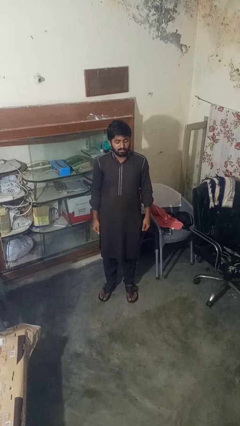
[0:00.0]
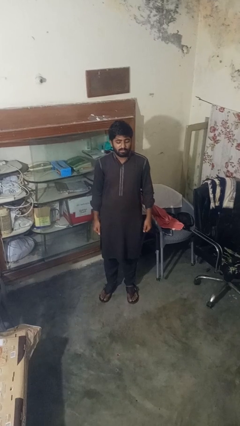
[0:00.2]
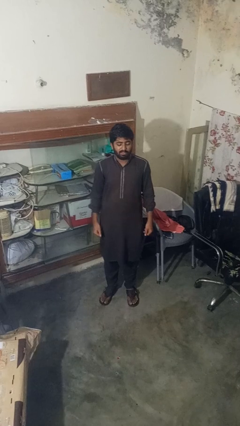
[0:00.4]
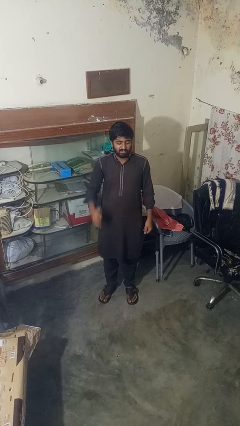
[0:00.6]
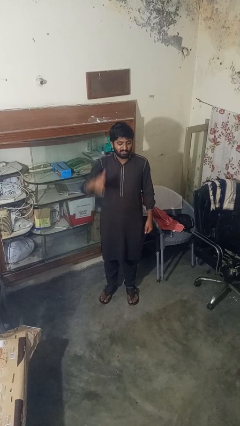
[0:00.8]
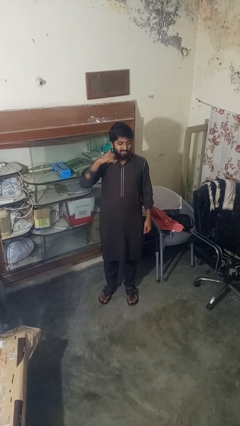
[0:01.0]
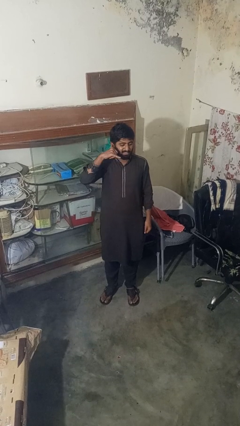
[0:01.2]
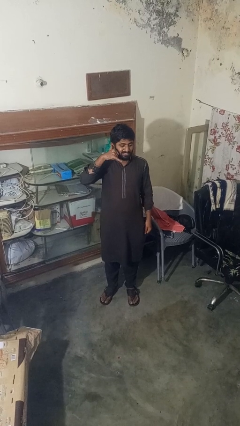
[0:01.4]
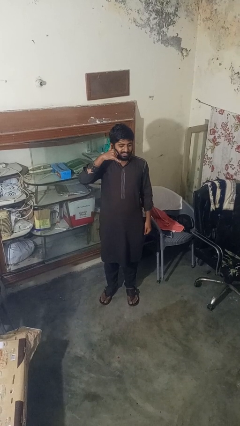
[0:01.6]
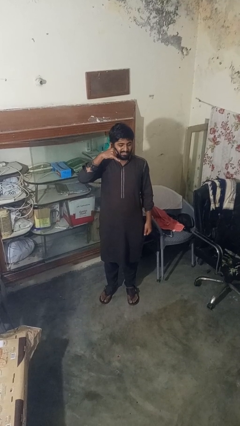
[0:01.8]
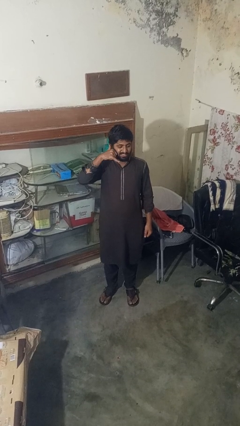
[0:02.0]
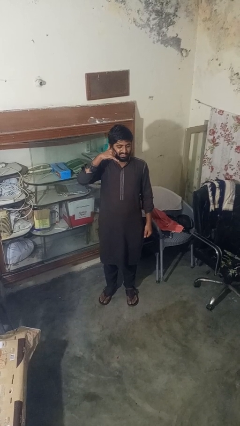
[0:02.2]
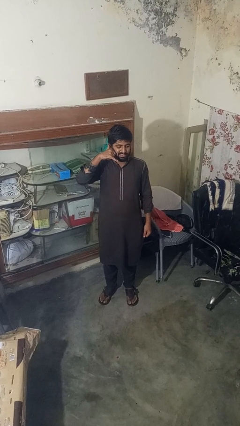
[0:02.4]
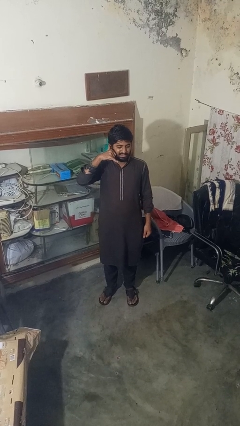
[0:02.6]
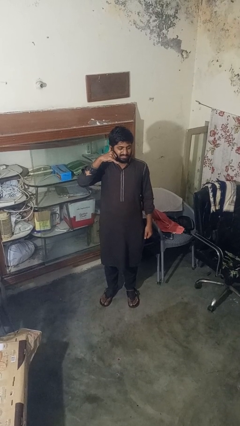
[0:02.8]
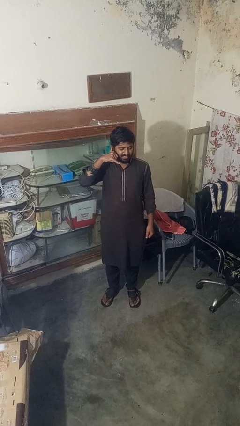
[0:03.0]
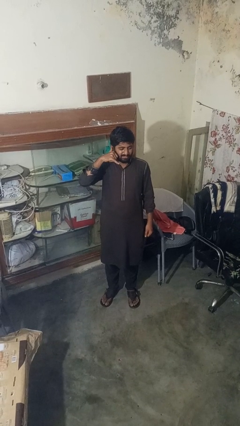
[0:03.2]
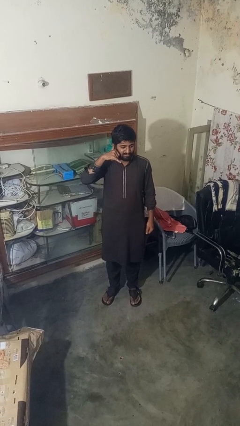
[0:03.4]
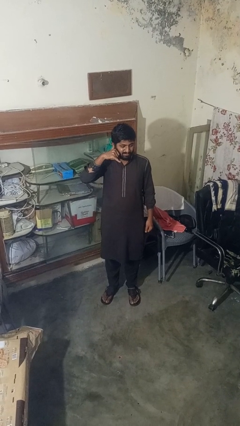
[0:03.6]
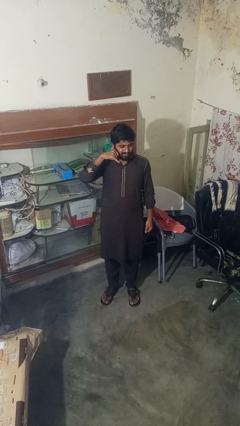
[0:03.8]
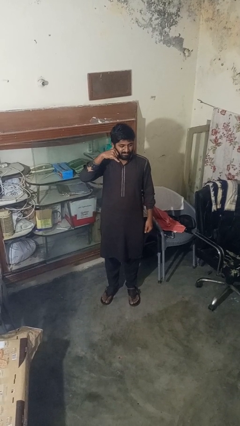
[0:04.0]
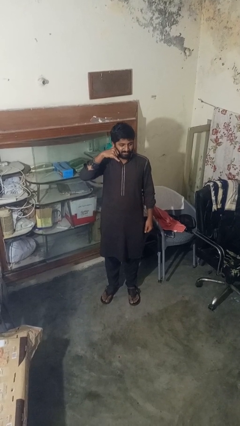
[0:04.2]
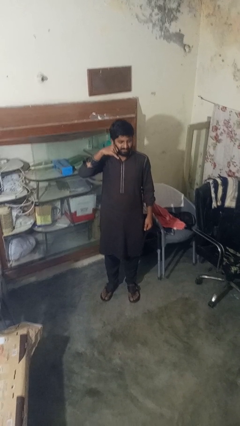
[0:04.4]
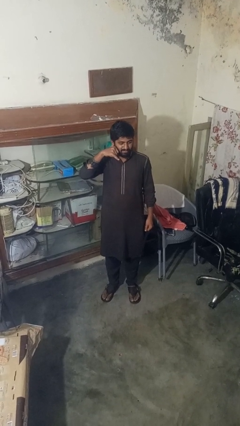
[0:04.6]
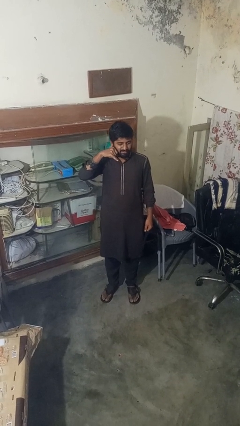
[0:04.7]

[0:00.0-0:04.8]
person gestures call me

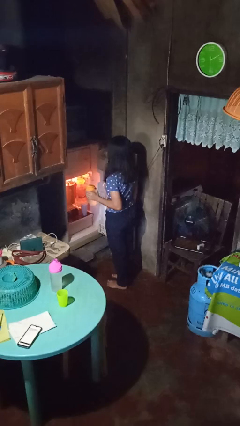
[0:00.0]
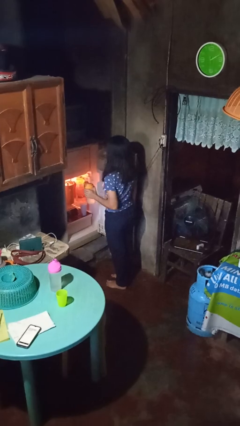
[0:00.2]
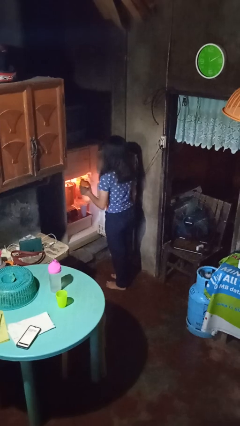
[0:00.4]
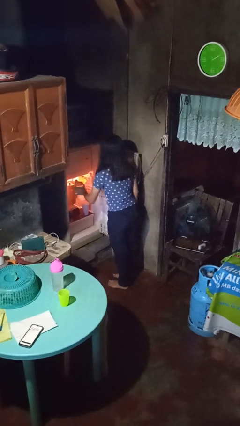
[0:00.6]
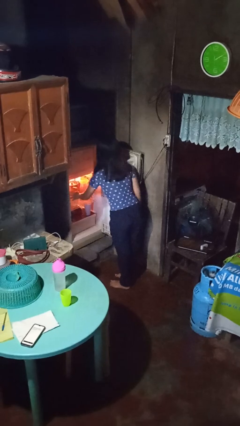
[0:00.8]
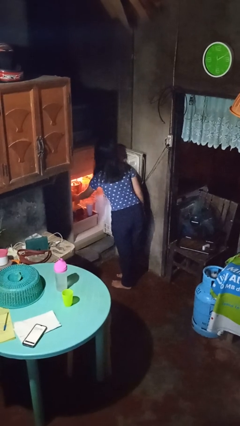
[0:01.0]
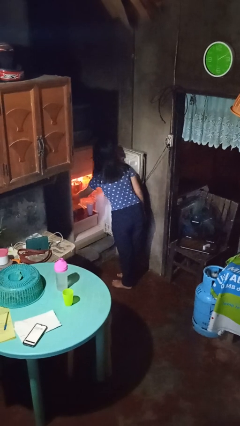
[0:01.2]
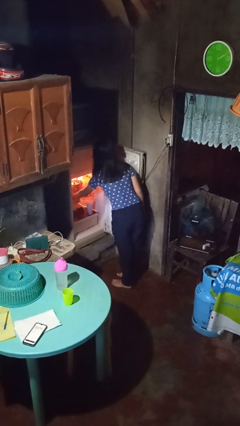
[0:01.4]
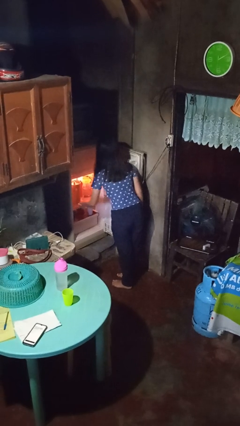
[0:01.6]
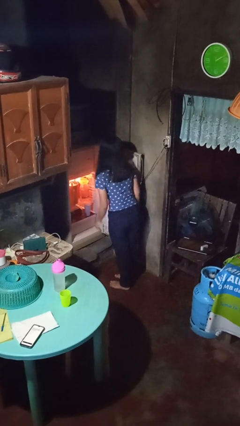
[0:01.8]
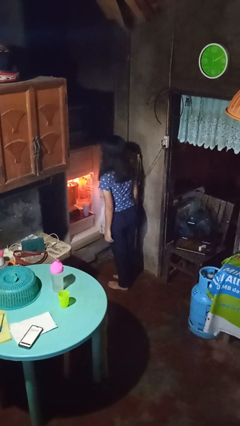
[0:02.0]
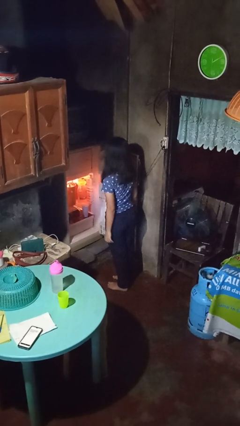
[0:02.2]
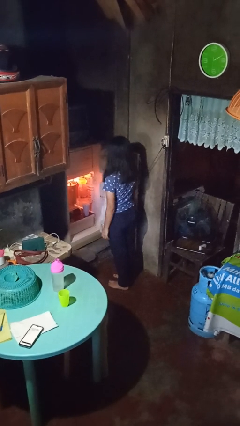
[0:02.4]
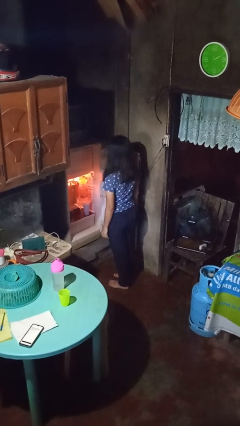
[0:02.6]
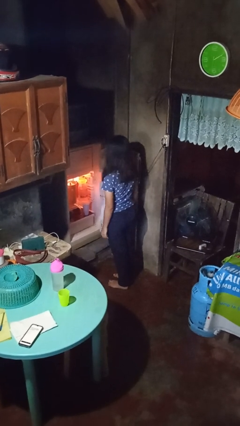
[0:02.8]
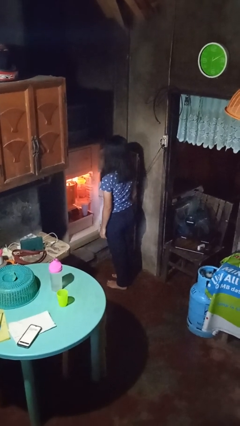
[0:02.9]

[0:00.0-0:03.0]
person puts object into refrigerator

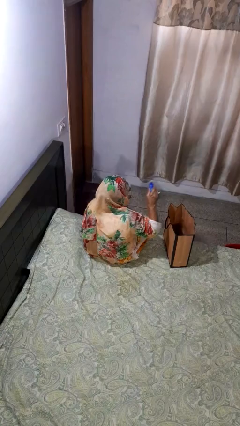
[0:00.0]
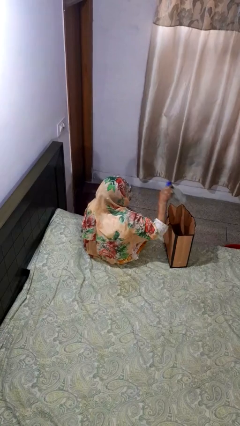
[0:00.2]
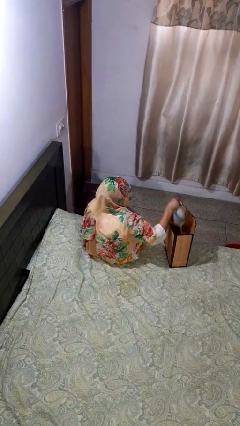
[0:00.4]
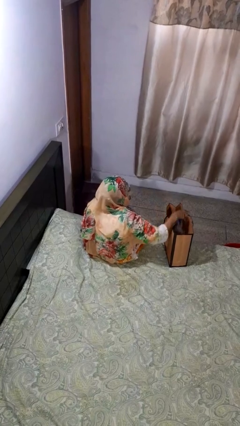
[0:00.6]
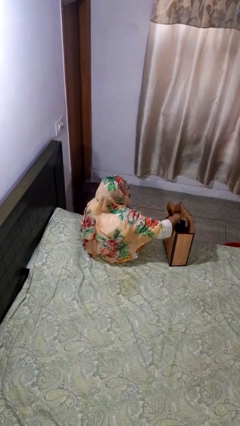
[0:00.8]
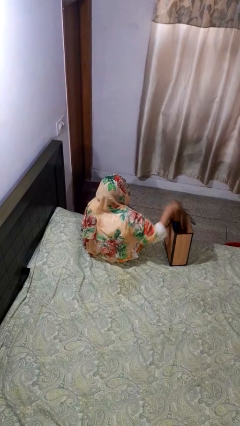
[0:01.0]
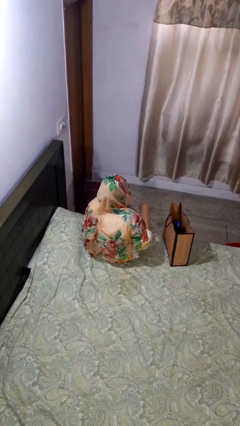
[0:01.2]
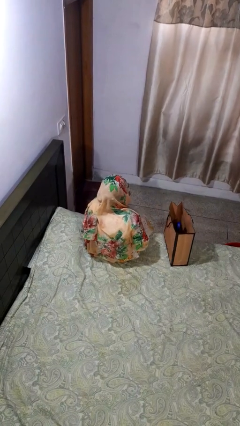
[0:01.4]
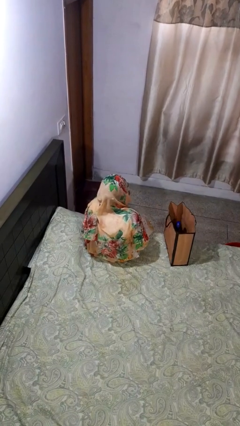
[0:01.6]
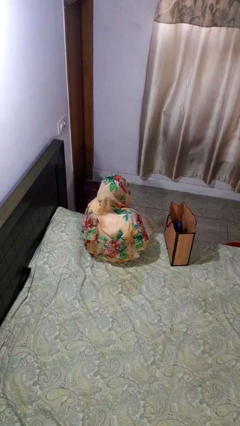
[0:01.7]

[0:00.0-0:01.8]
person puts object into bag

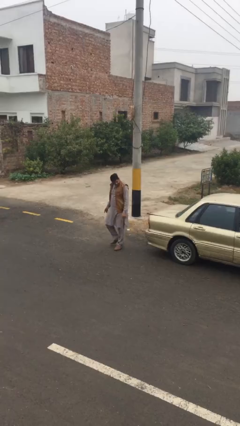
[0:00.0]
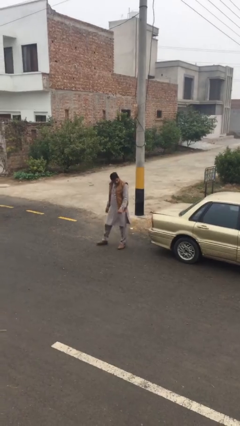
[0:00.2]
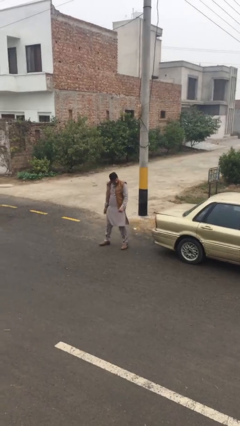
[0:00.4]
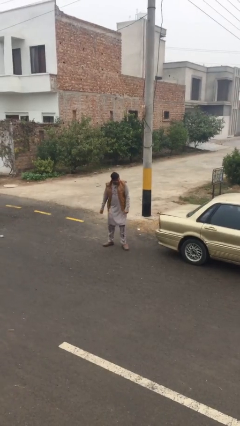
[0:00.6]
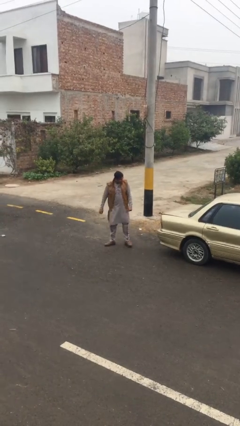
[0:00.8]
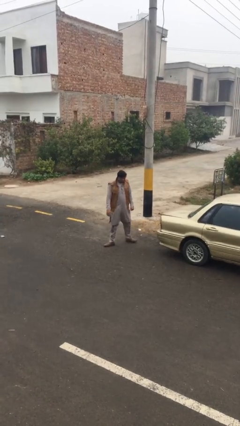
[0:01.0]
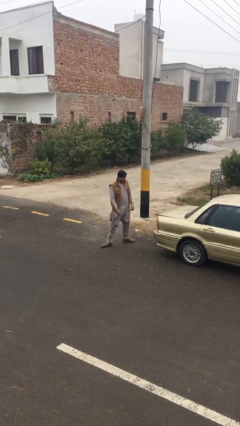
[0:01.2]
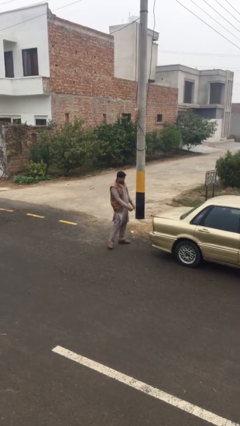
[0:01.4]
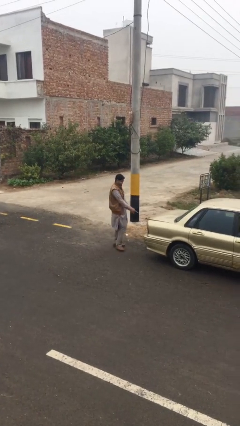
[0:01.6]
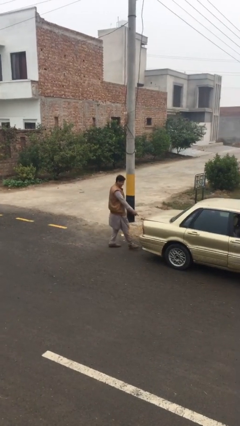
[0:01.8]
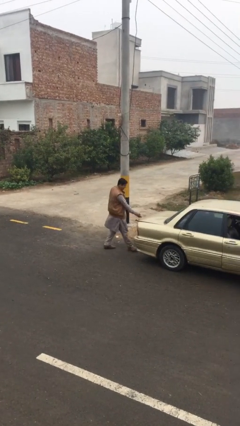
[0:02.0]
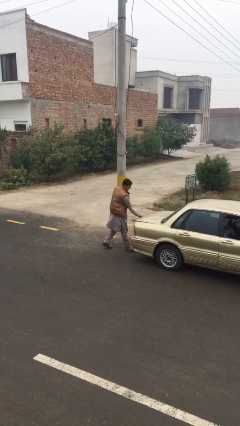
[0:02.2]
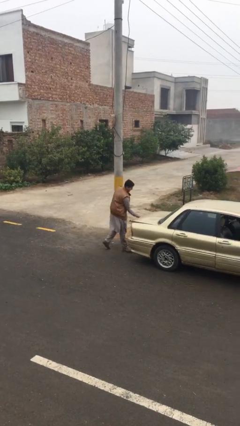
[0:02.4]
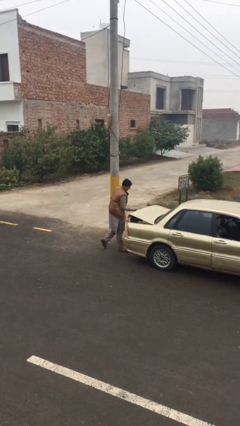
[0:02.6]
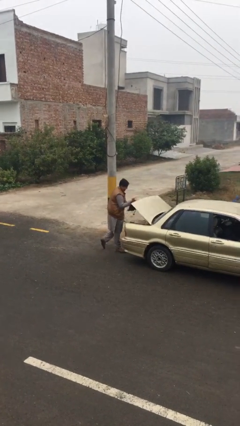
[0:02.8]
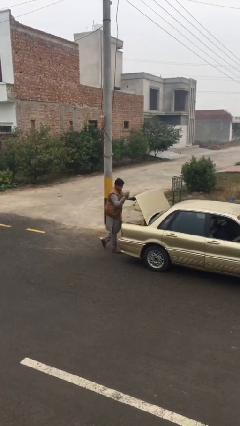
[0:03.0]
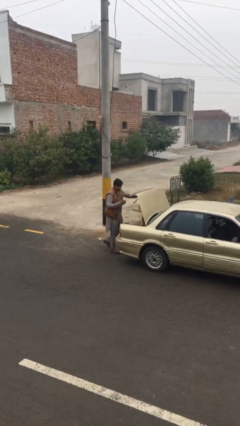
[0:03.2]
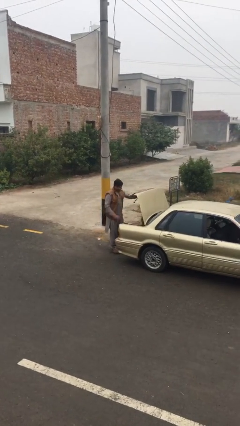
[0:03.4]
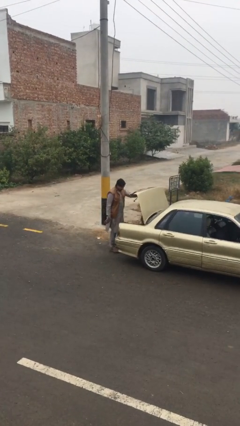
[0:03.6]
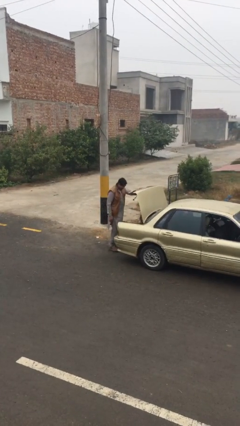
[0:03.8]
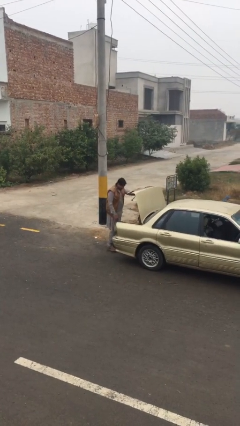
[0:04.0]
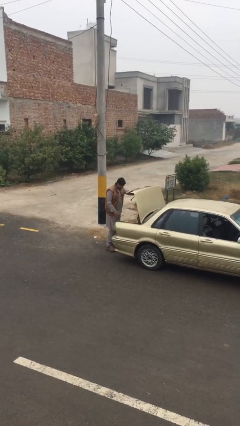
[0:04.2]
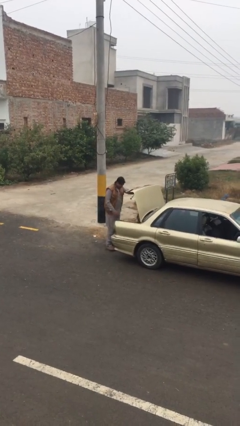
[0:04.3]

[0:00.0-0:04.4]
person opens car trunk

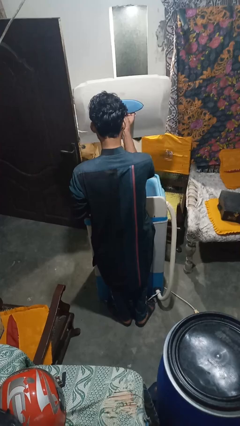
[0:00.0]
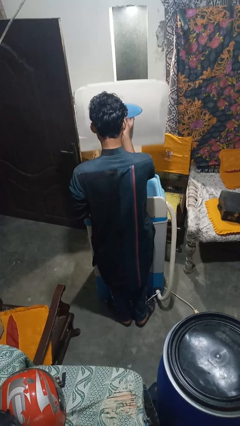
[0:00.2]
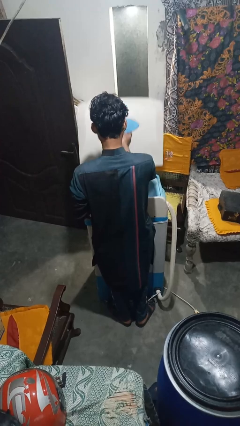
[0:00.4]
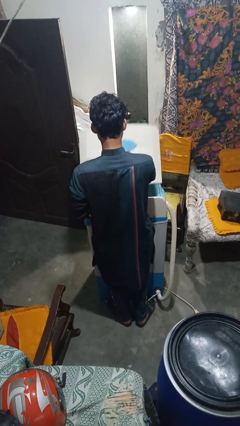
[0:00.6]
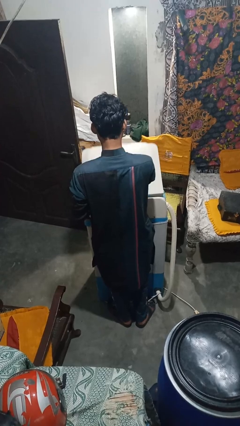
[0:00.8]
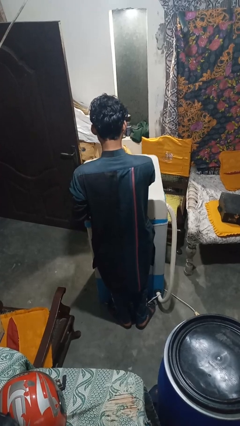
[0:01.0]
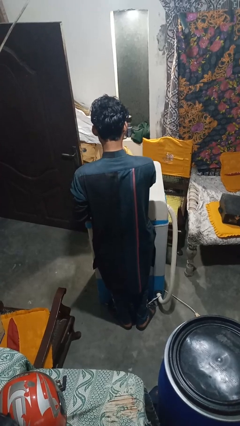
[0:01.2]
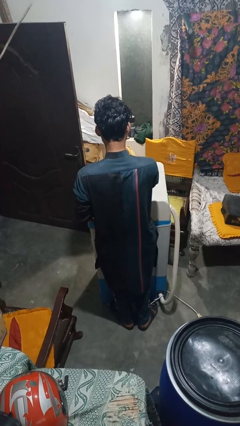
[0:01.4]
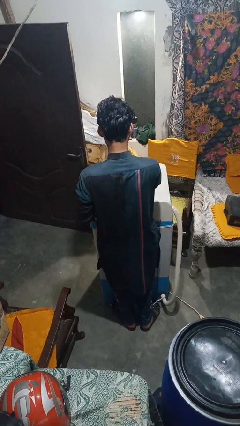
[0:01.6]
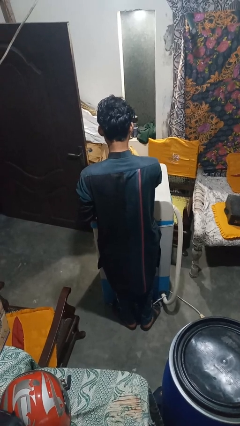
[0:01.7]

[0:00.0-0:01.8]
person closes clothes washer

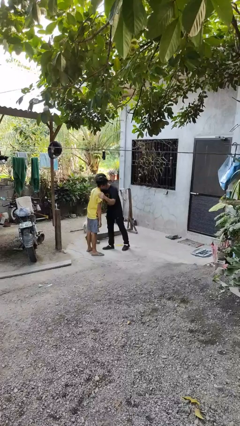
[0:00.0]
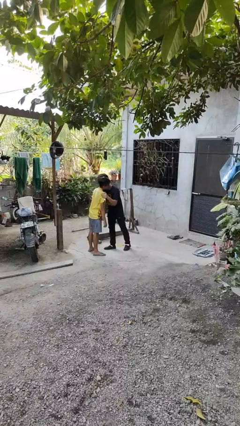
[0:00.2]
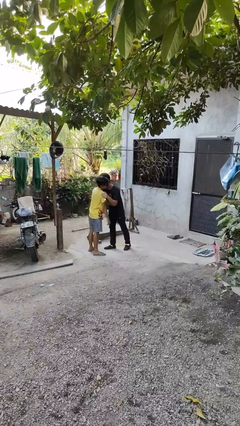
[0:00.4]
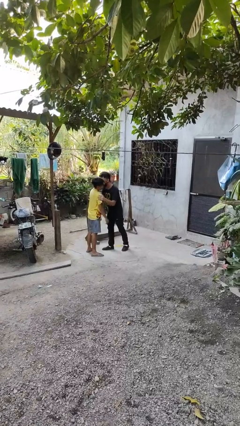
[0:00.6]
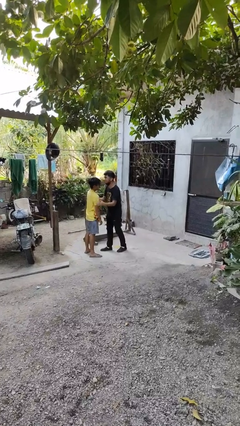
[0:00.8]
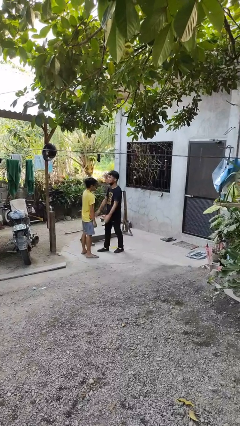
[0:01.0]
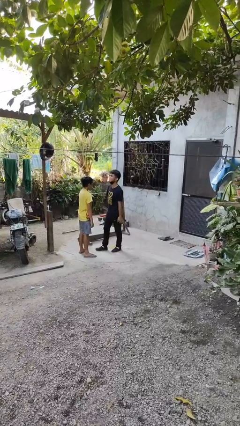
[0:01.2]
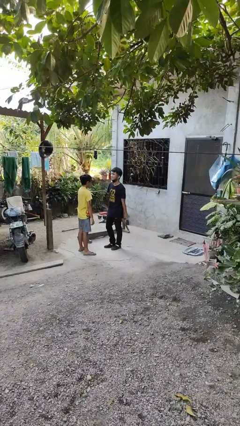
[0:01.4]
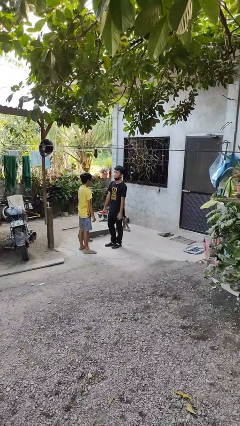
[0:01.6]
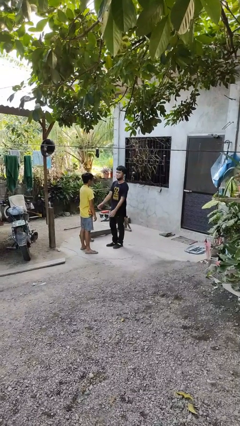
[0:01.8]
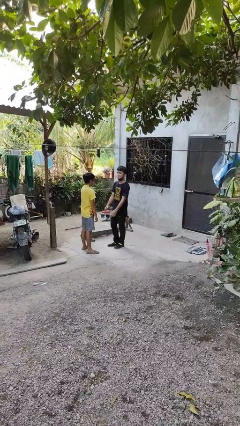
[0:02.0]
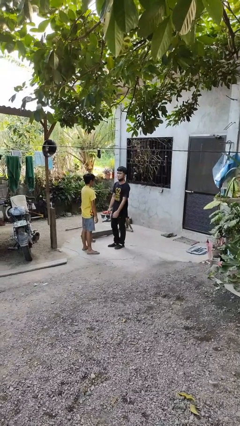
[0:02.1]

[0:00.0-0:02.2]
person kisses cheek of person
